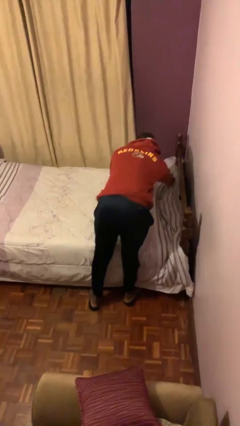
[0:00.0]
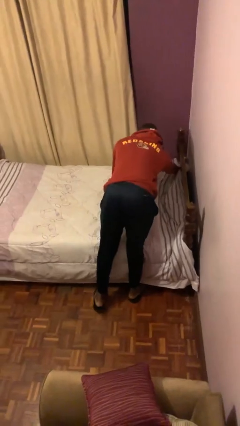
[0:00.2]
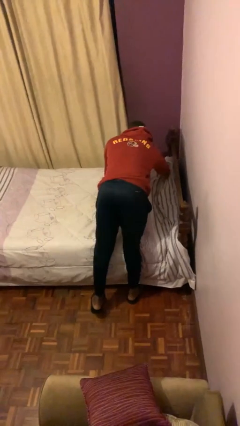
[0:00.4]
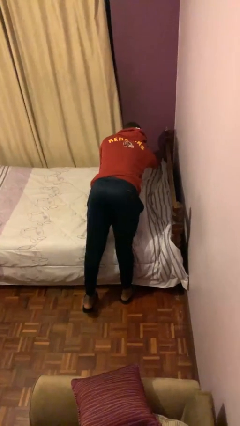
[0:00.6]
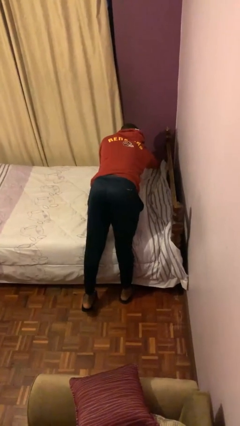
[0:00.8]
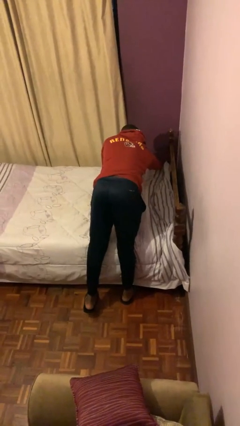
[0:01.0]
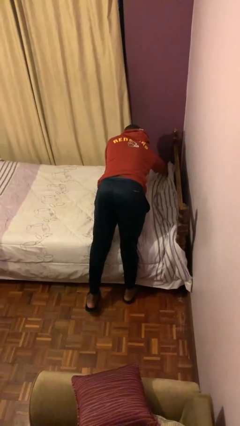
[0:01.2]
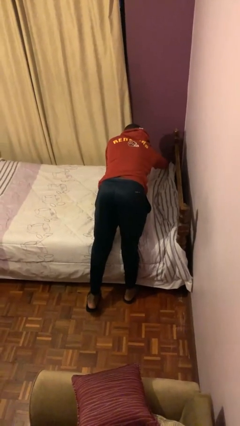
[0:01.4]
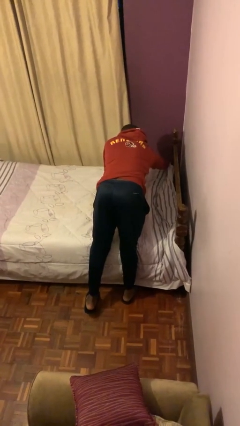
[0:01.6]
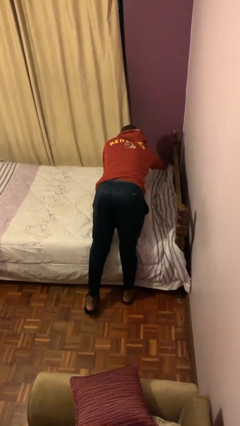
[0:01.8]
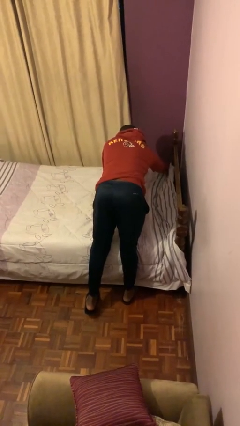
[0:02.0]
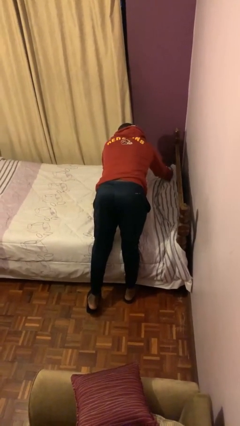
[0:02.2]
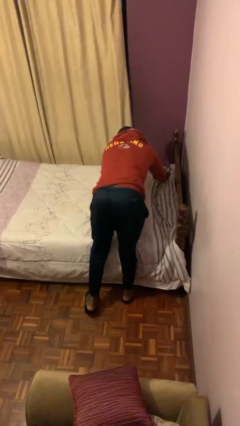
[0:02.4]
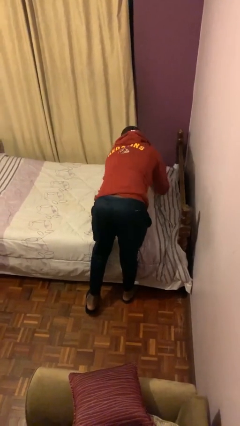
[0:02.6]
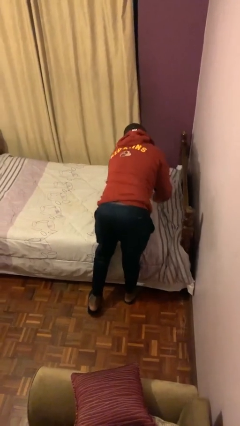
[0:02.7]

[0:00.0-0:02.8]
person makes bed

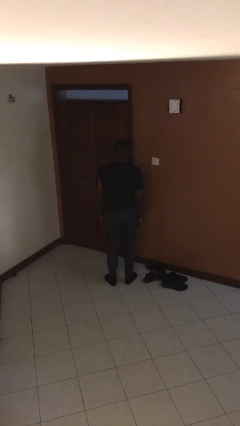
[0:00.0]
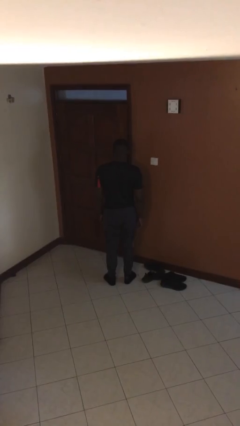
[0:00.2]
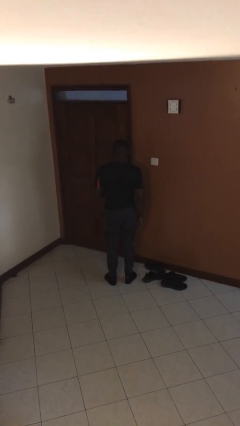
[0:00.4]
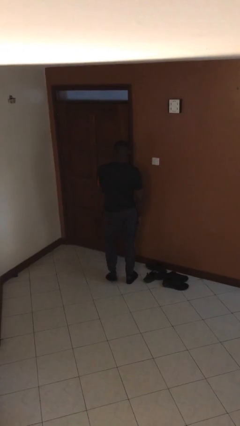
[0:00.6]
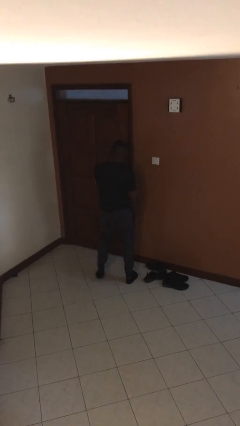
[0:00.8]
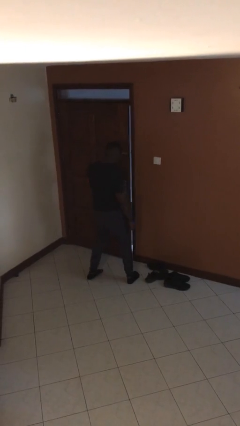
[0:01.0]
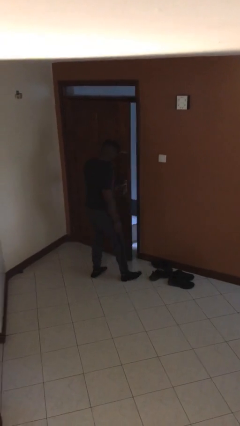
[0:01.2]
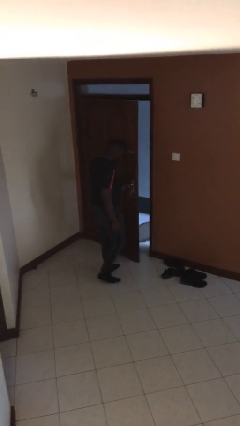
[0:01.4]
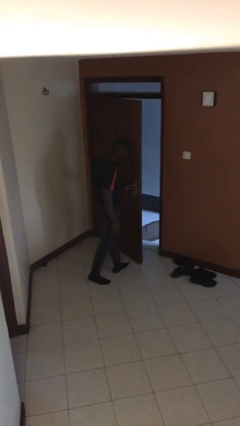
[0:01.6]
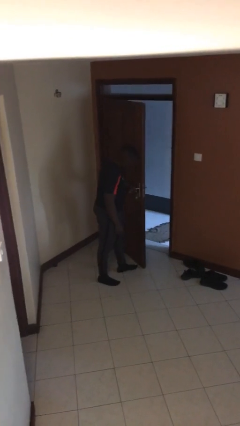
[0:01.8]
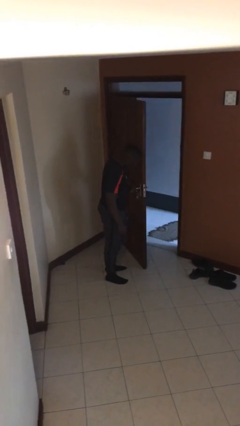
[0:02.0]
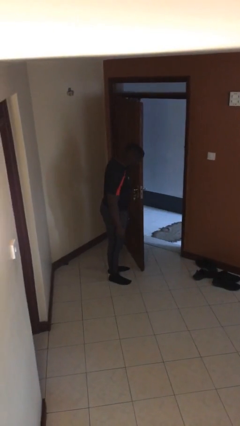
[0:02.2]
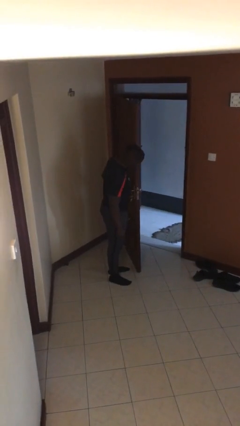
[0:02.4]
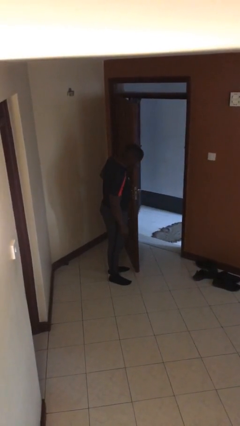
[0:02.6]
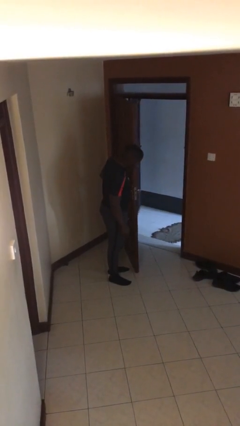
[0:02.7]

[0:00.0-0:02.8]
person opens facility door

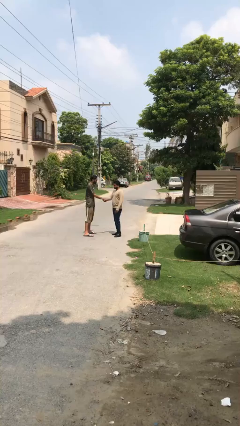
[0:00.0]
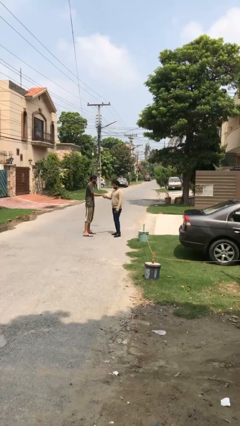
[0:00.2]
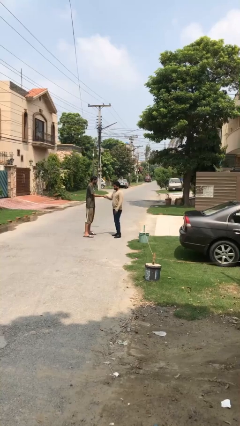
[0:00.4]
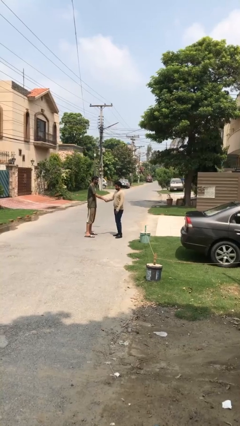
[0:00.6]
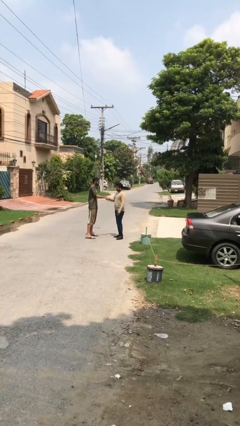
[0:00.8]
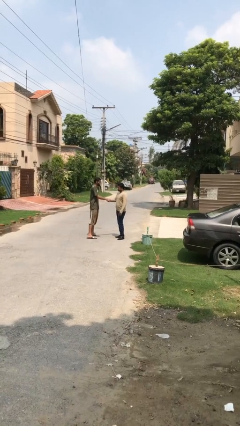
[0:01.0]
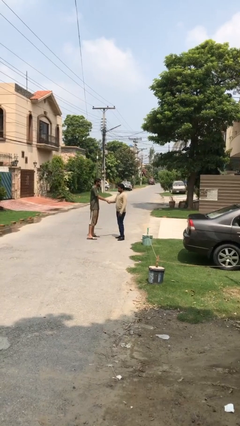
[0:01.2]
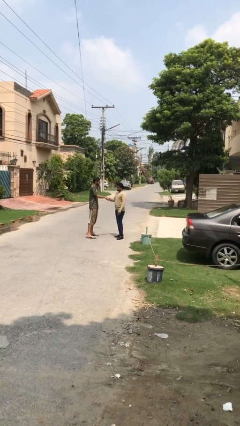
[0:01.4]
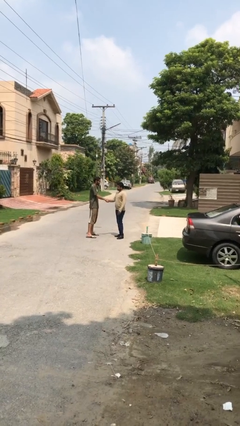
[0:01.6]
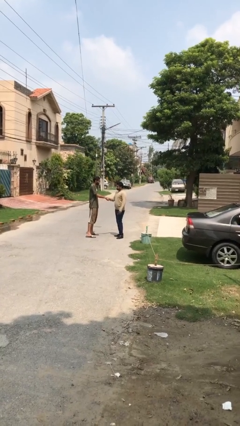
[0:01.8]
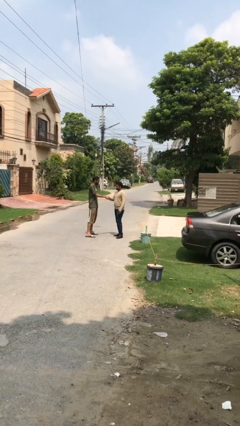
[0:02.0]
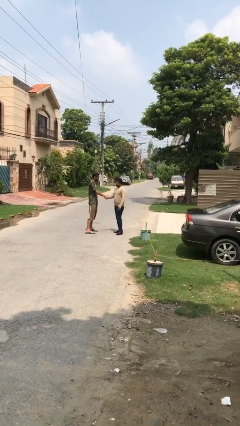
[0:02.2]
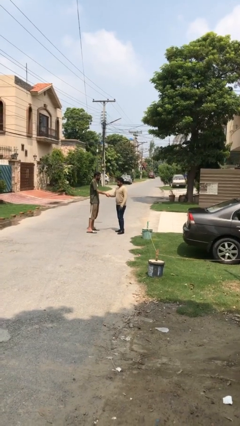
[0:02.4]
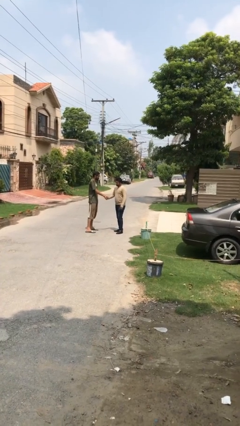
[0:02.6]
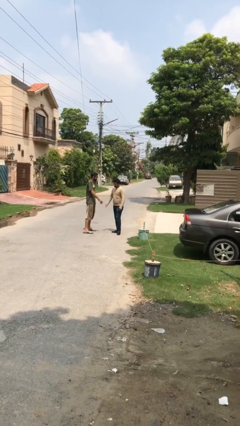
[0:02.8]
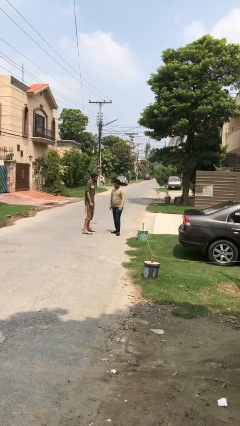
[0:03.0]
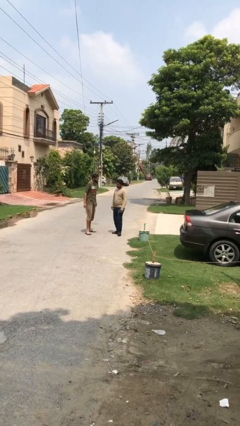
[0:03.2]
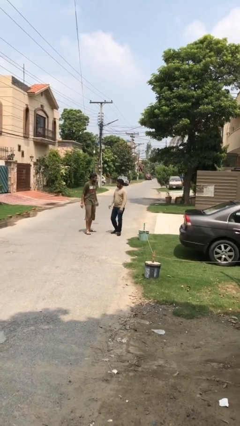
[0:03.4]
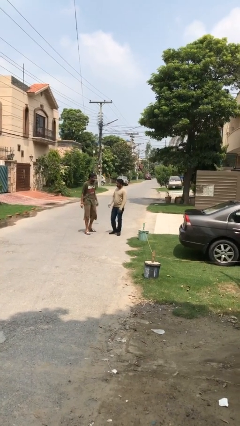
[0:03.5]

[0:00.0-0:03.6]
person shakes hand

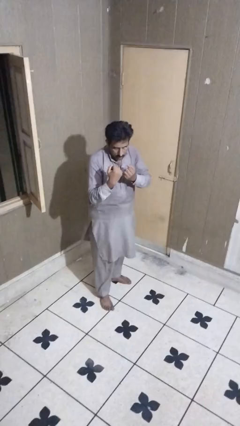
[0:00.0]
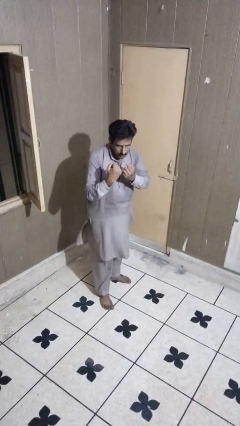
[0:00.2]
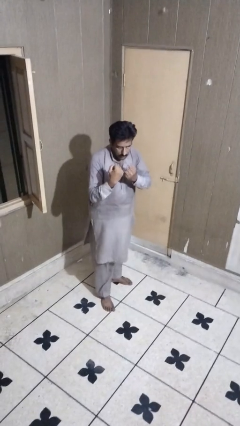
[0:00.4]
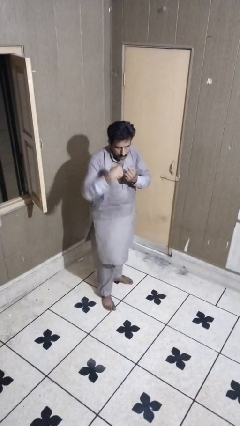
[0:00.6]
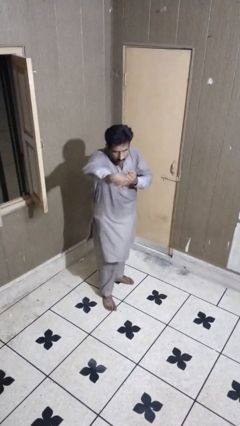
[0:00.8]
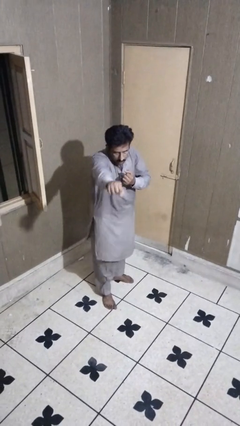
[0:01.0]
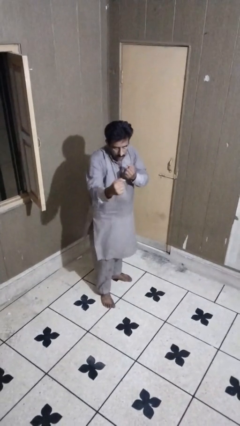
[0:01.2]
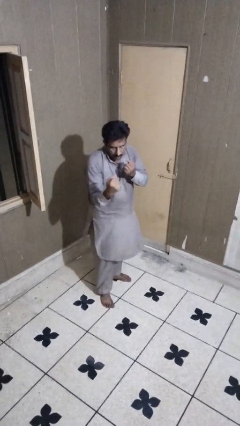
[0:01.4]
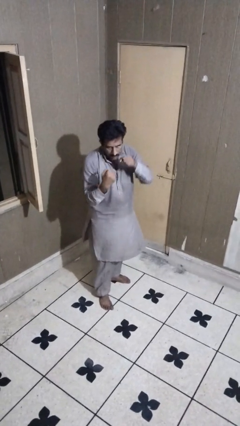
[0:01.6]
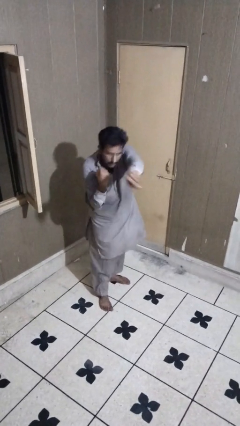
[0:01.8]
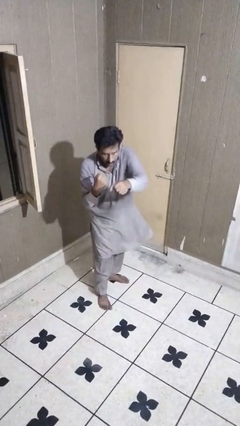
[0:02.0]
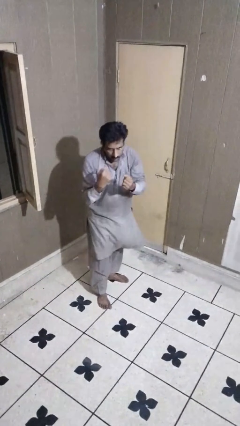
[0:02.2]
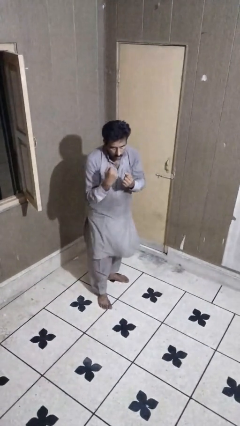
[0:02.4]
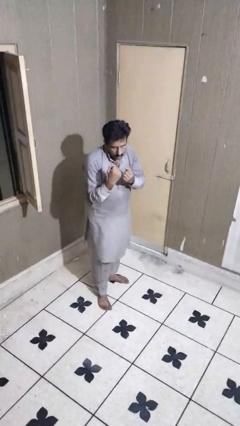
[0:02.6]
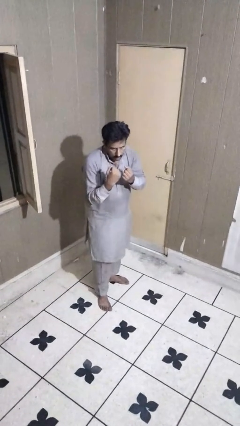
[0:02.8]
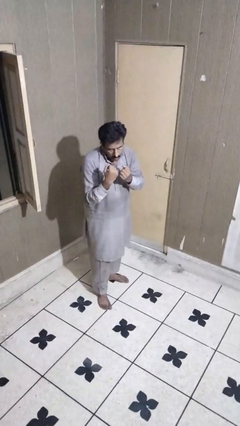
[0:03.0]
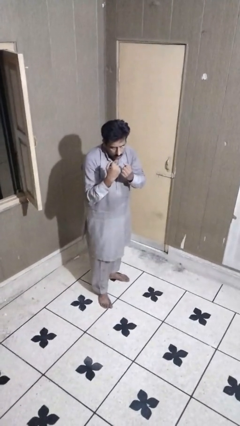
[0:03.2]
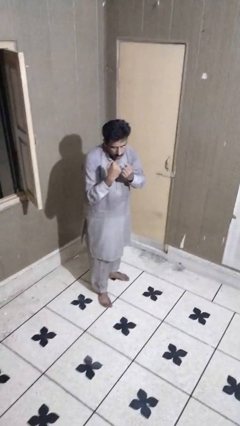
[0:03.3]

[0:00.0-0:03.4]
person punches

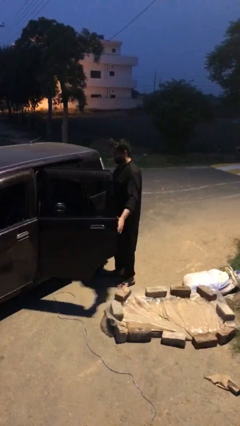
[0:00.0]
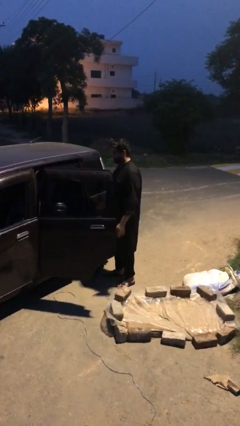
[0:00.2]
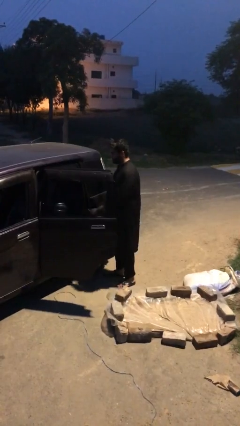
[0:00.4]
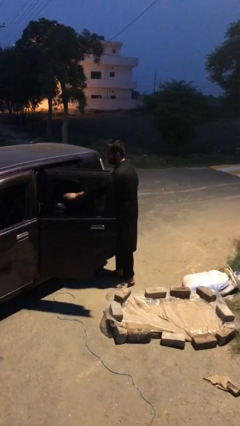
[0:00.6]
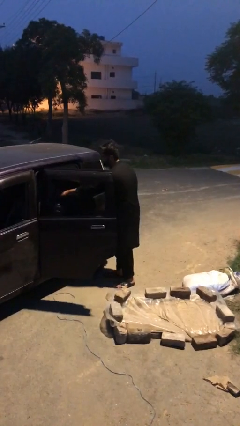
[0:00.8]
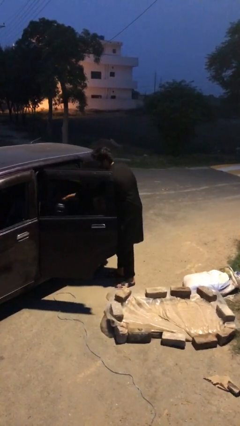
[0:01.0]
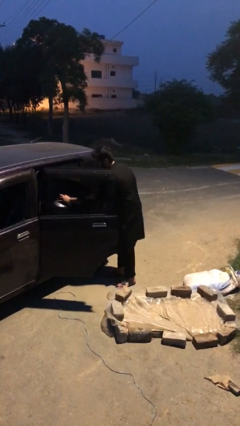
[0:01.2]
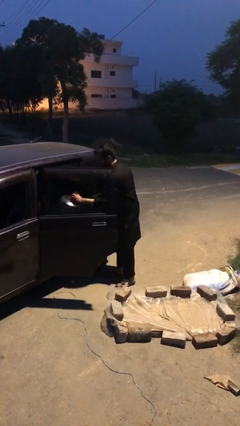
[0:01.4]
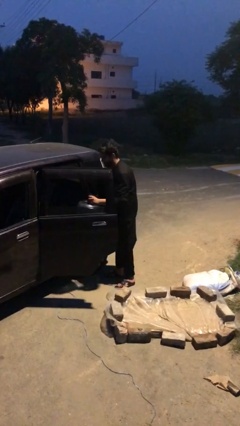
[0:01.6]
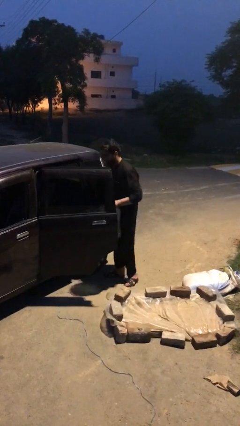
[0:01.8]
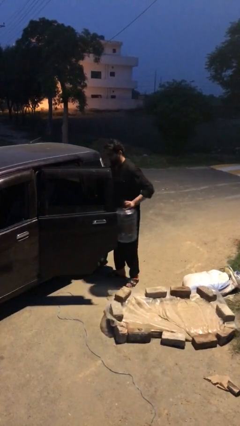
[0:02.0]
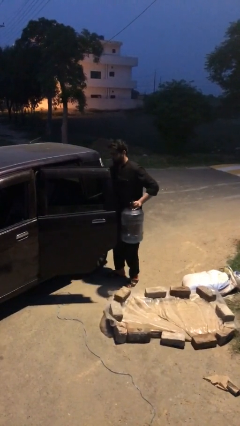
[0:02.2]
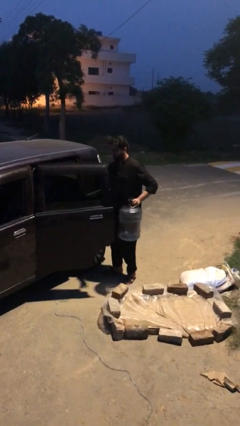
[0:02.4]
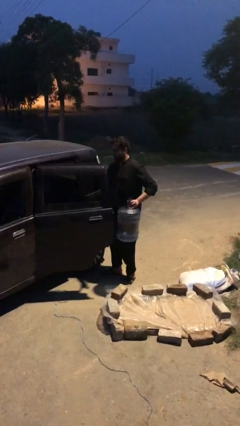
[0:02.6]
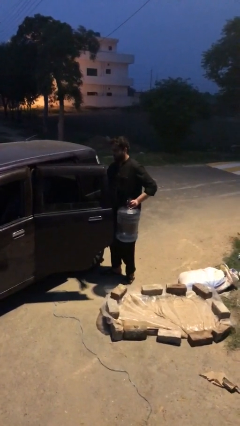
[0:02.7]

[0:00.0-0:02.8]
person unloads car

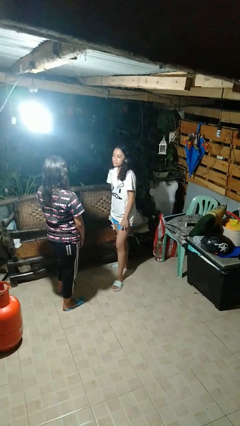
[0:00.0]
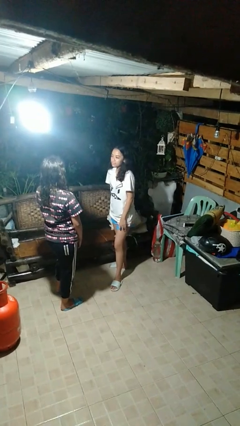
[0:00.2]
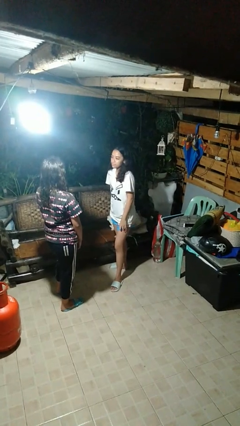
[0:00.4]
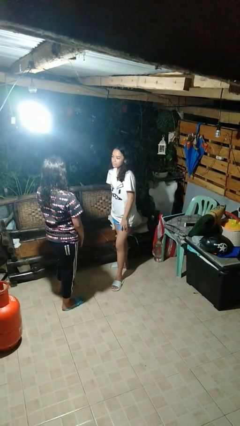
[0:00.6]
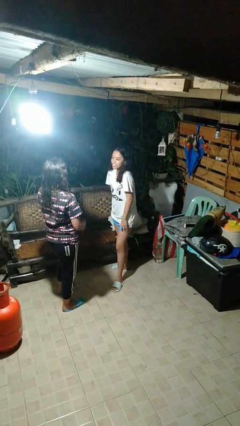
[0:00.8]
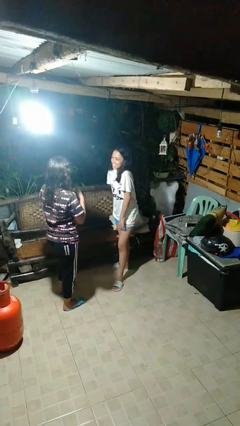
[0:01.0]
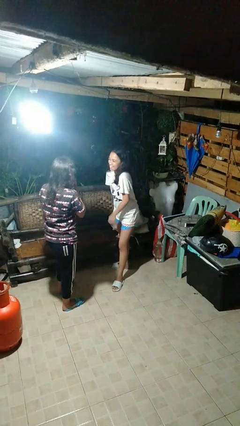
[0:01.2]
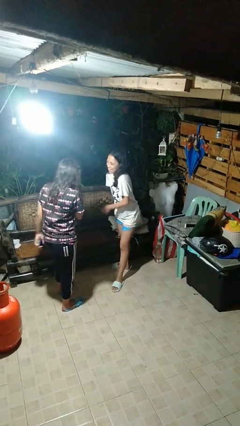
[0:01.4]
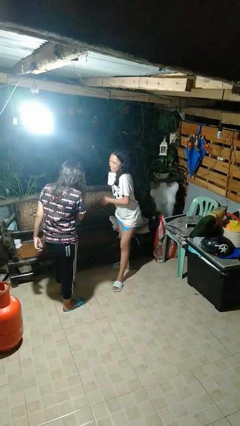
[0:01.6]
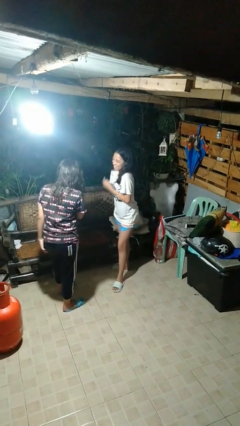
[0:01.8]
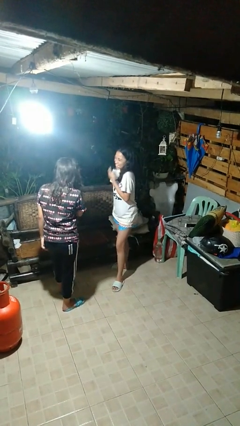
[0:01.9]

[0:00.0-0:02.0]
person laughs with person
